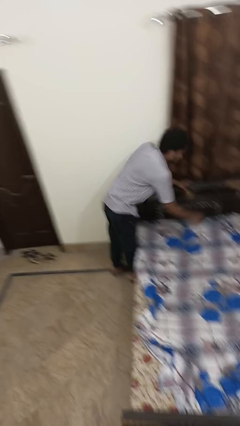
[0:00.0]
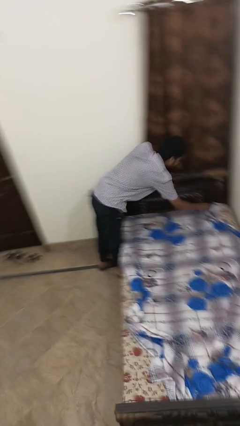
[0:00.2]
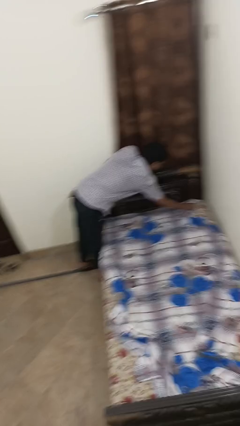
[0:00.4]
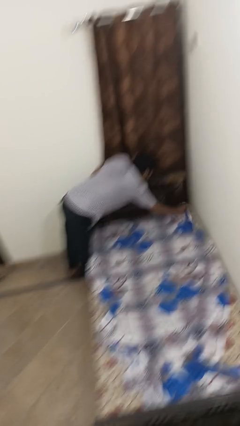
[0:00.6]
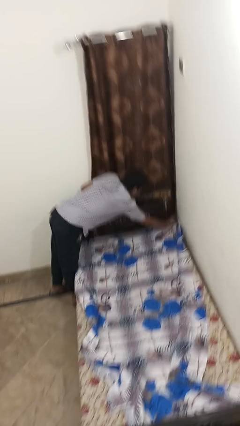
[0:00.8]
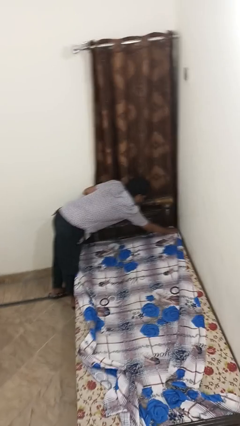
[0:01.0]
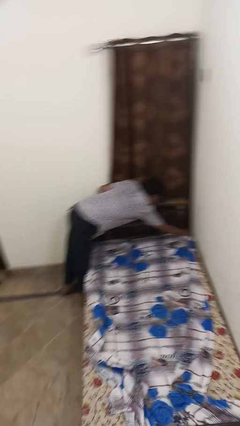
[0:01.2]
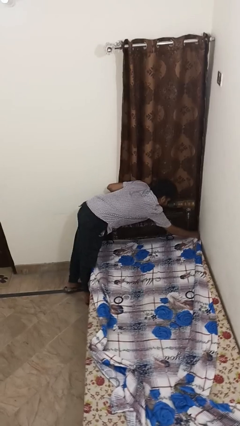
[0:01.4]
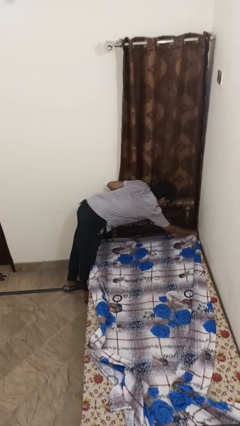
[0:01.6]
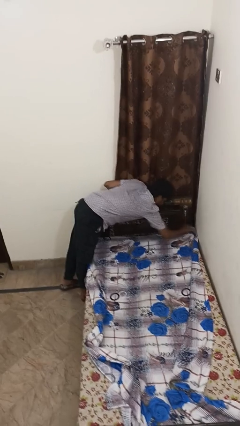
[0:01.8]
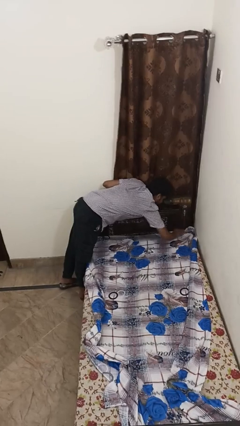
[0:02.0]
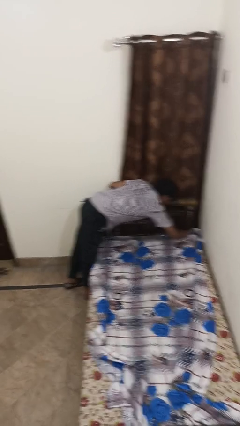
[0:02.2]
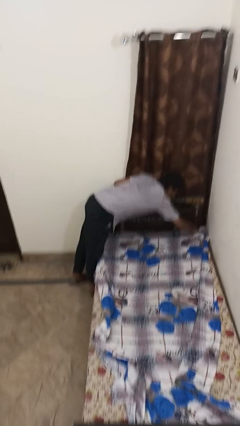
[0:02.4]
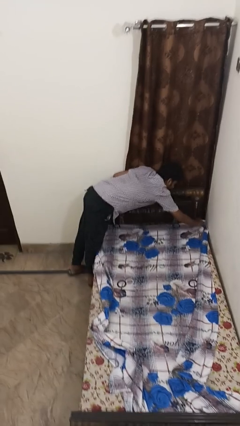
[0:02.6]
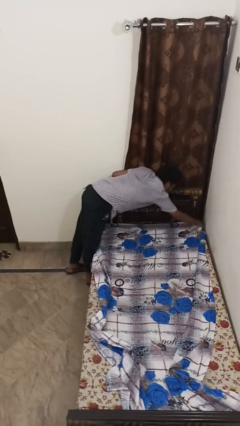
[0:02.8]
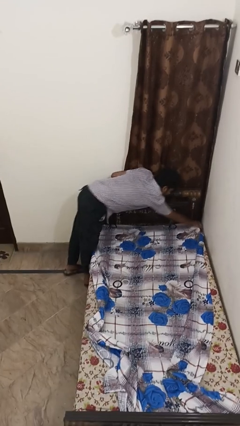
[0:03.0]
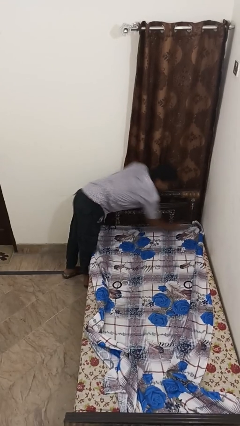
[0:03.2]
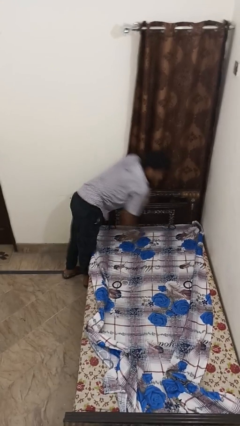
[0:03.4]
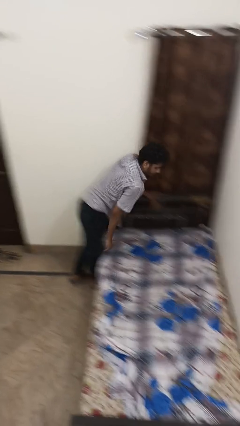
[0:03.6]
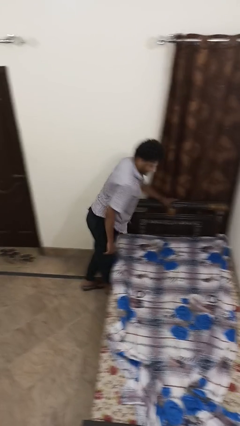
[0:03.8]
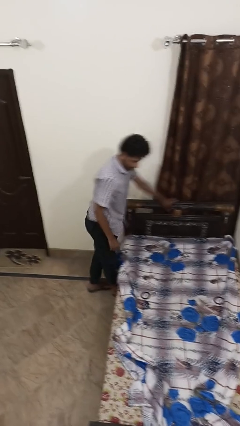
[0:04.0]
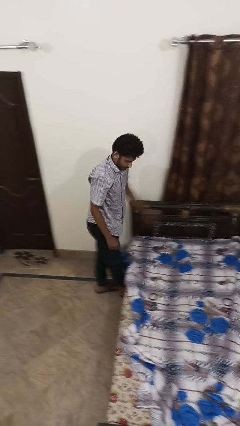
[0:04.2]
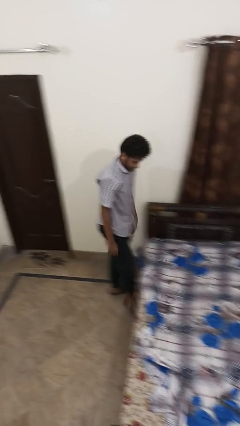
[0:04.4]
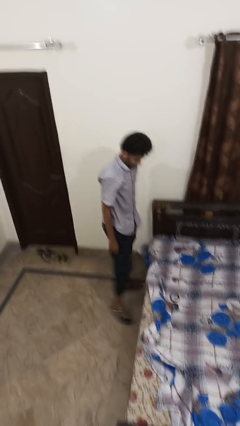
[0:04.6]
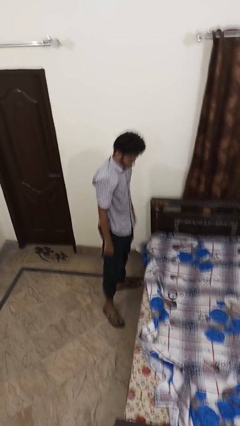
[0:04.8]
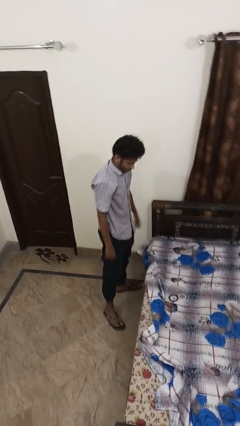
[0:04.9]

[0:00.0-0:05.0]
person makes bed

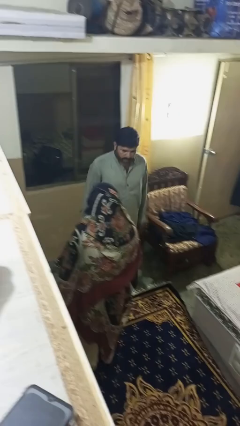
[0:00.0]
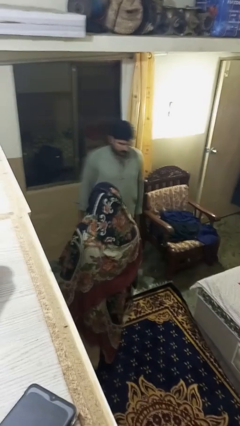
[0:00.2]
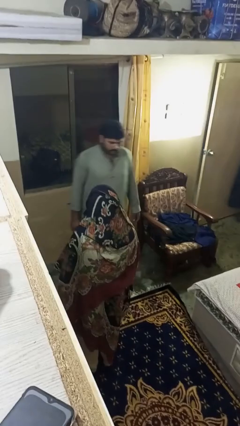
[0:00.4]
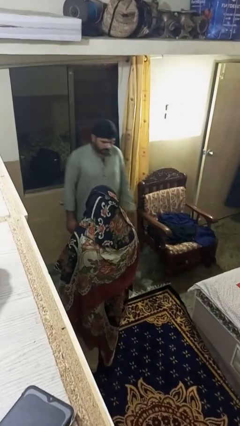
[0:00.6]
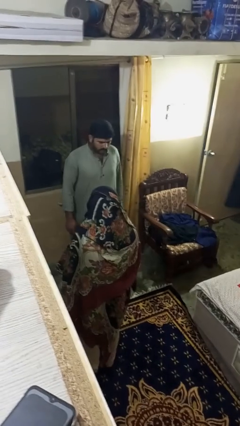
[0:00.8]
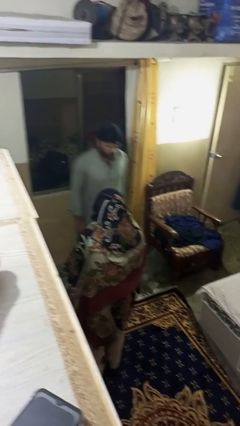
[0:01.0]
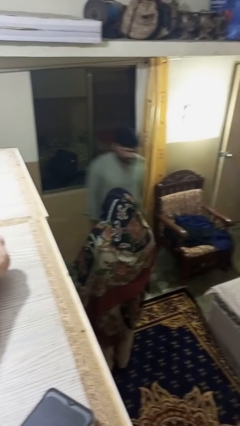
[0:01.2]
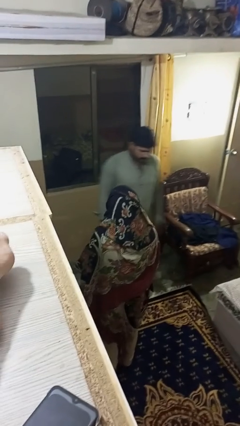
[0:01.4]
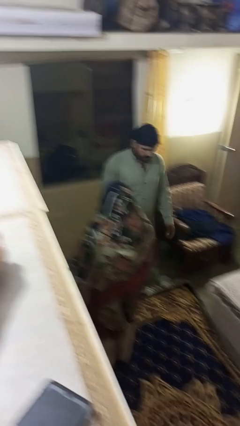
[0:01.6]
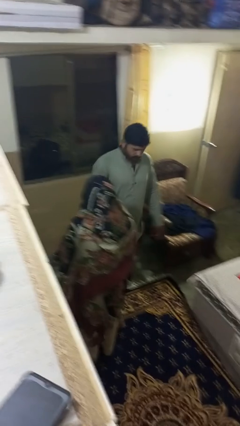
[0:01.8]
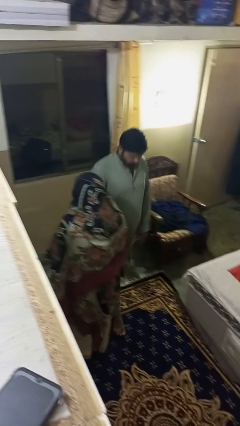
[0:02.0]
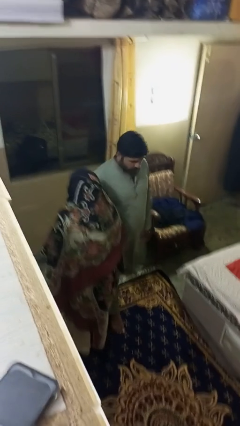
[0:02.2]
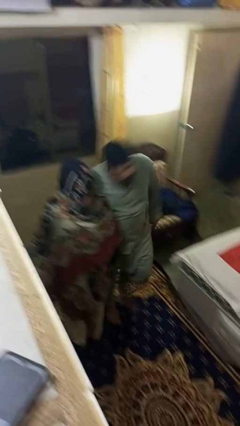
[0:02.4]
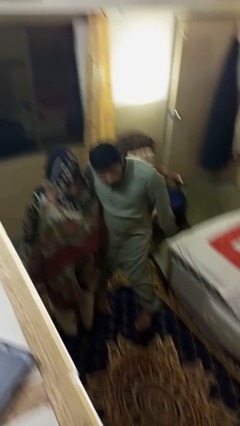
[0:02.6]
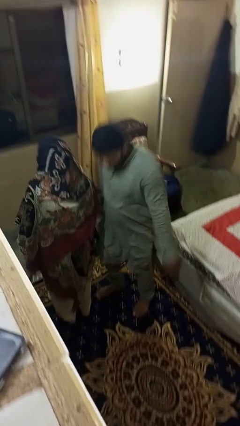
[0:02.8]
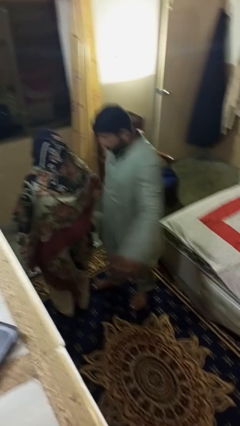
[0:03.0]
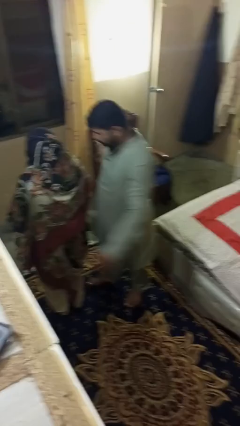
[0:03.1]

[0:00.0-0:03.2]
person bumps into person

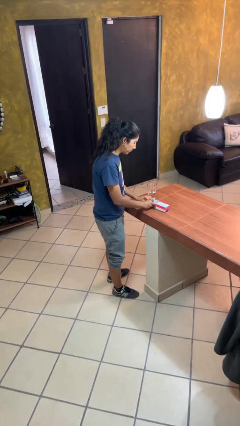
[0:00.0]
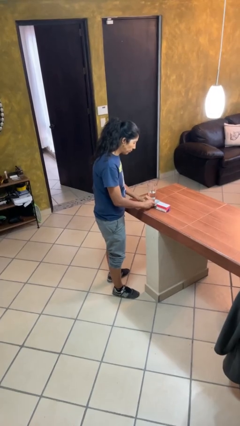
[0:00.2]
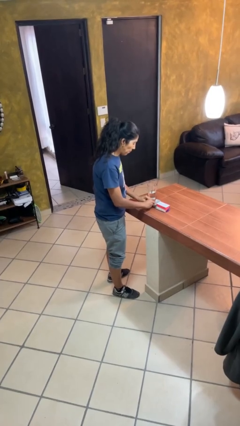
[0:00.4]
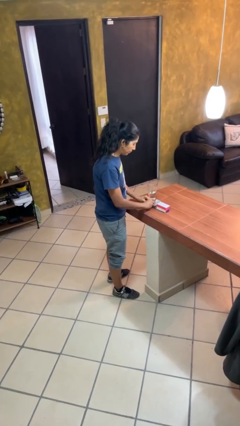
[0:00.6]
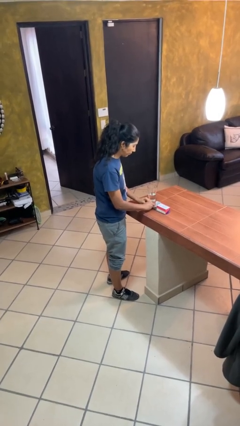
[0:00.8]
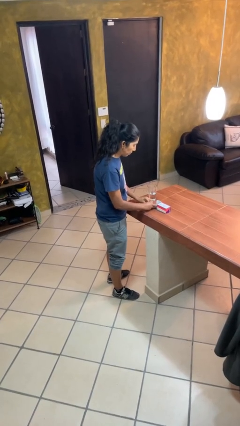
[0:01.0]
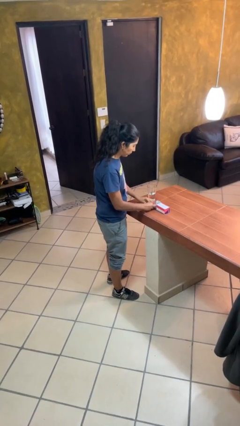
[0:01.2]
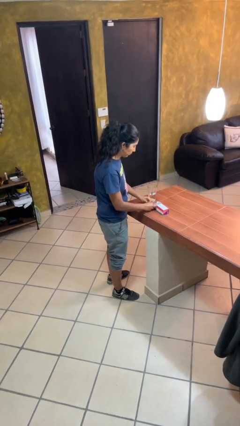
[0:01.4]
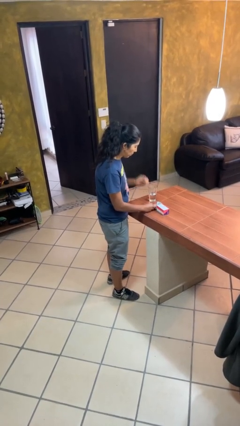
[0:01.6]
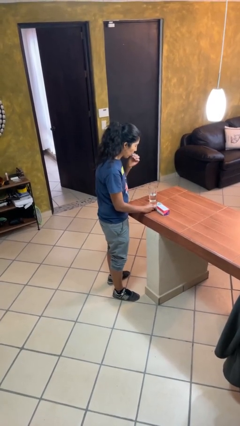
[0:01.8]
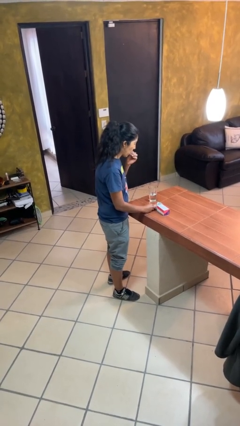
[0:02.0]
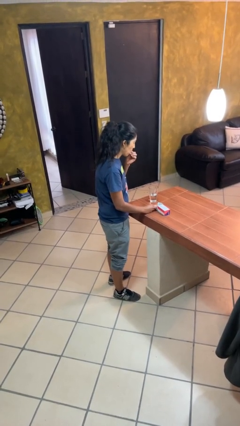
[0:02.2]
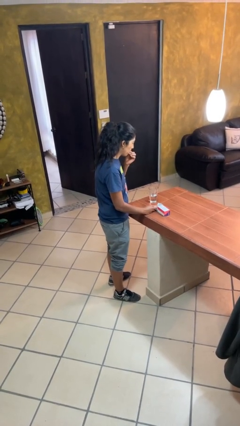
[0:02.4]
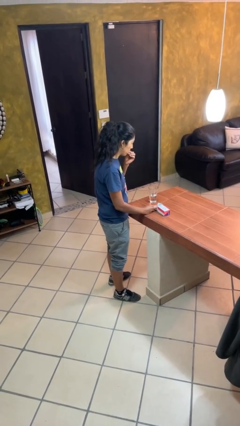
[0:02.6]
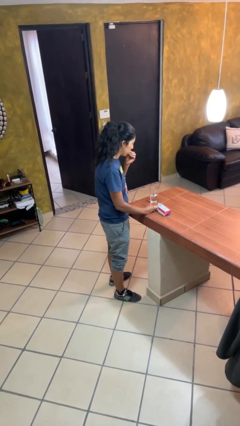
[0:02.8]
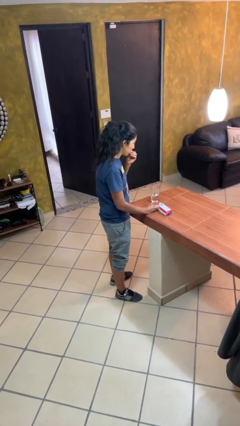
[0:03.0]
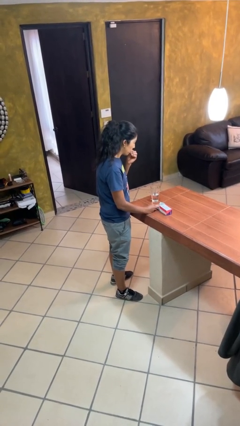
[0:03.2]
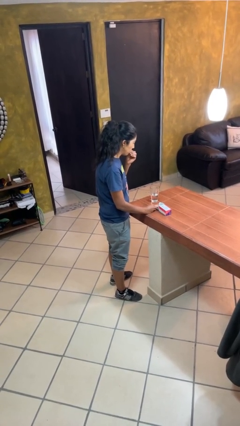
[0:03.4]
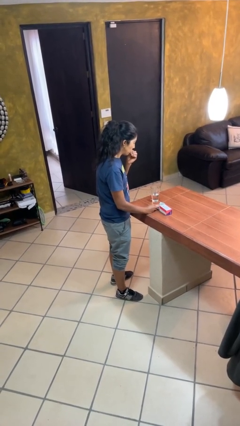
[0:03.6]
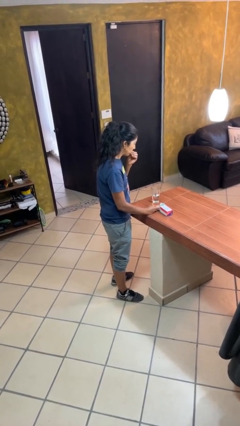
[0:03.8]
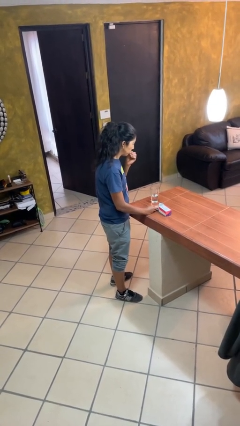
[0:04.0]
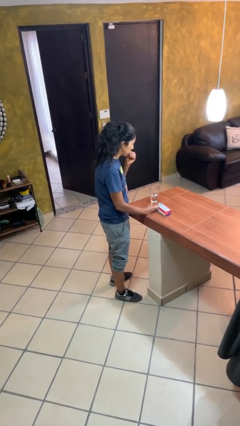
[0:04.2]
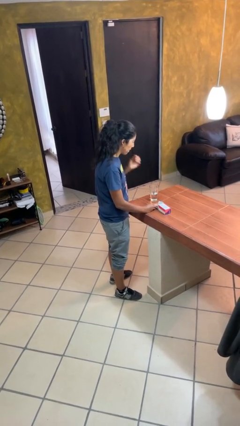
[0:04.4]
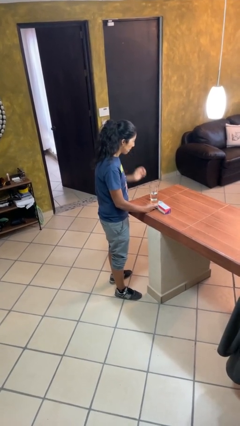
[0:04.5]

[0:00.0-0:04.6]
person takes medicine pills

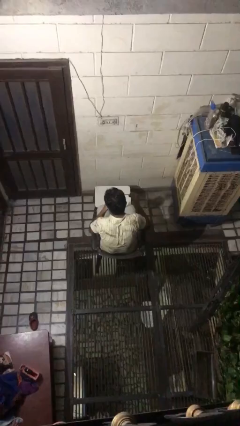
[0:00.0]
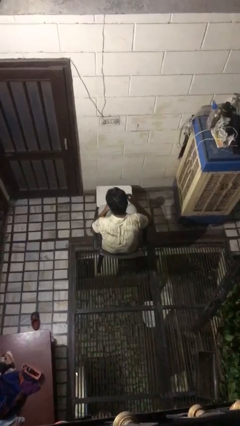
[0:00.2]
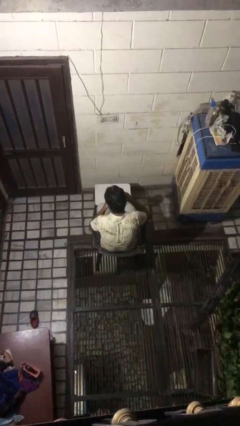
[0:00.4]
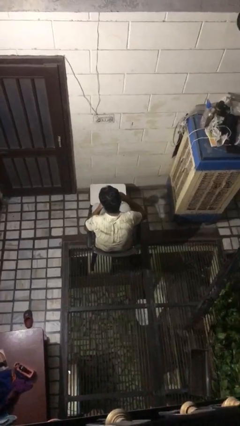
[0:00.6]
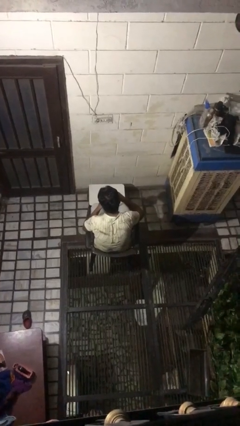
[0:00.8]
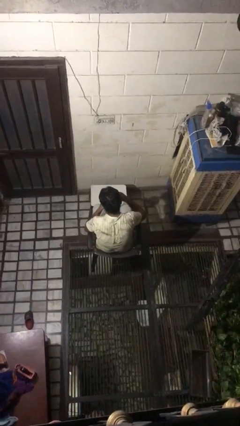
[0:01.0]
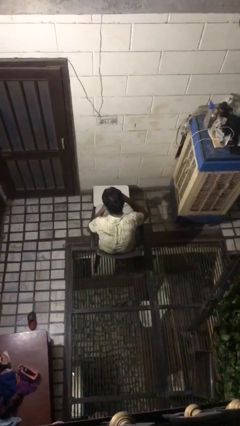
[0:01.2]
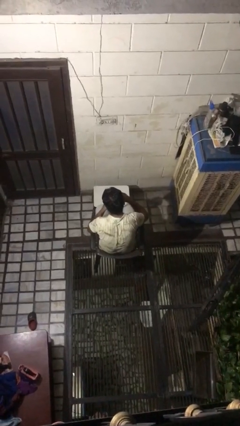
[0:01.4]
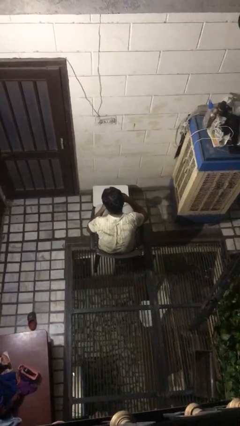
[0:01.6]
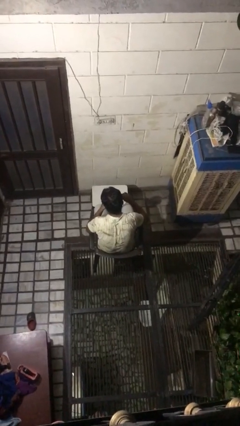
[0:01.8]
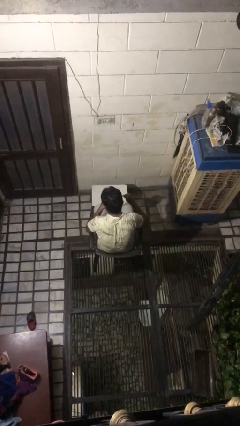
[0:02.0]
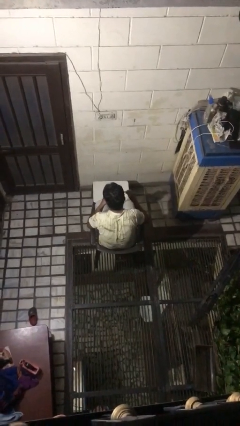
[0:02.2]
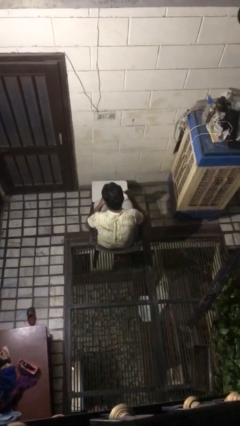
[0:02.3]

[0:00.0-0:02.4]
person stirs mug

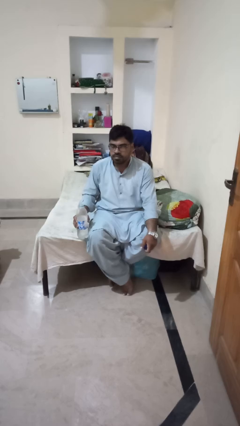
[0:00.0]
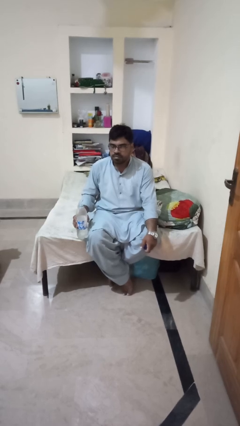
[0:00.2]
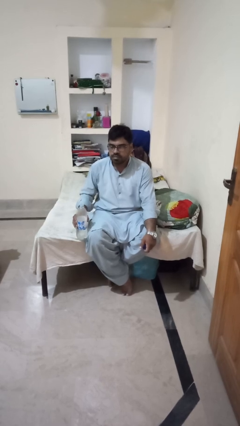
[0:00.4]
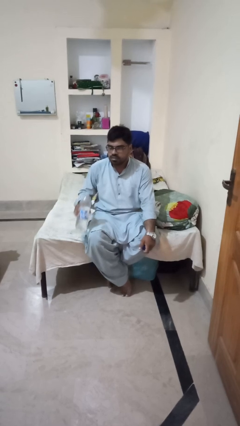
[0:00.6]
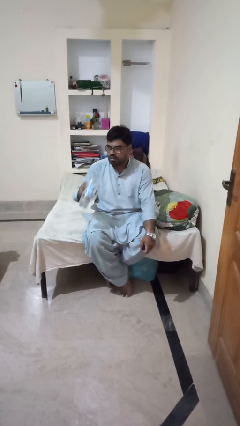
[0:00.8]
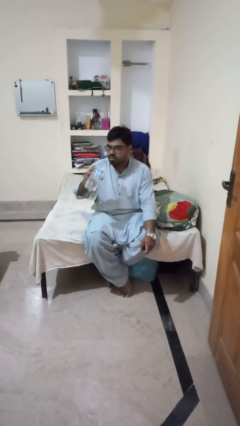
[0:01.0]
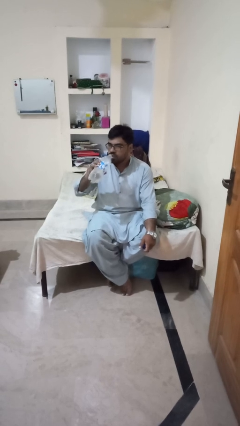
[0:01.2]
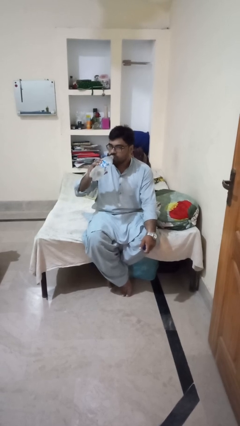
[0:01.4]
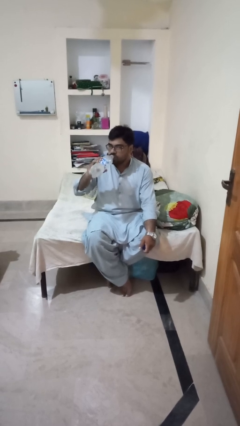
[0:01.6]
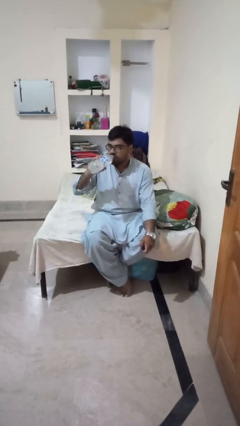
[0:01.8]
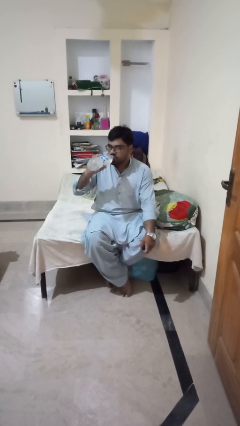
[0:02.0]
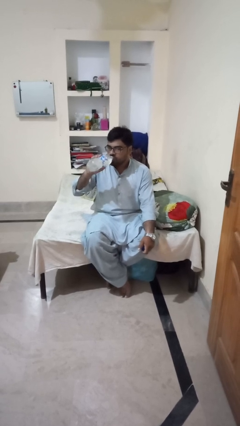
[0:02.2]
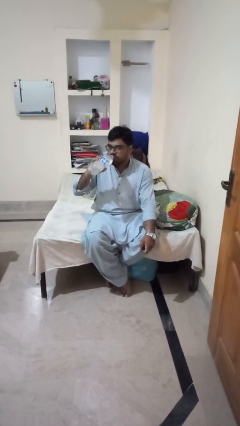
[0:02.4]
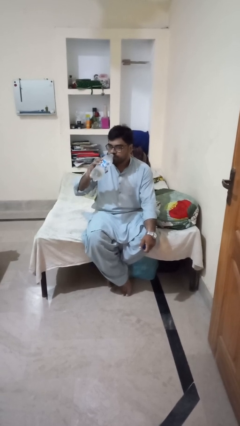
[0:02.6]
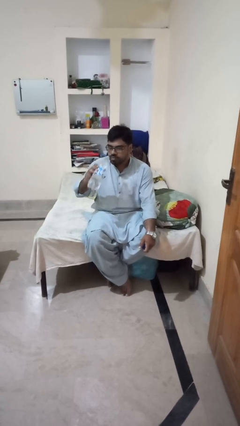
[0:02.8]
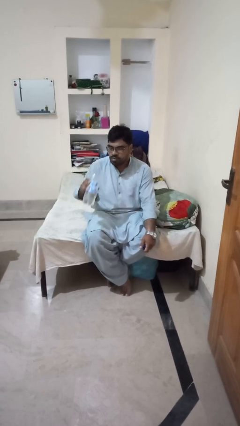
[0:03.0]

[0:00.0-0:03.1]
person drinks from bottle
